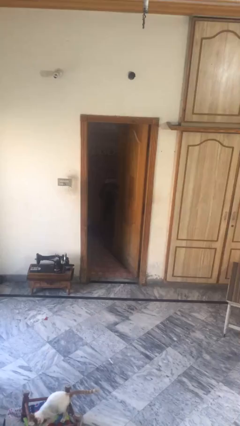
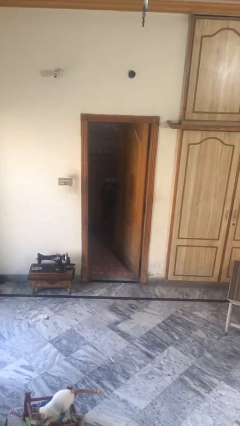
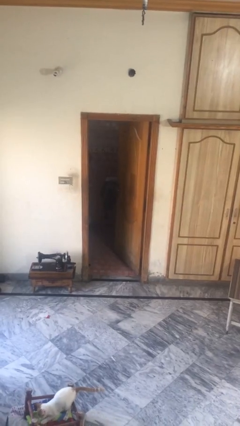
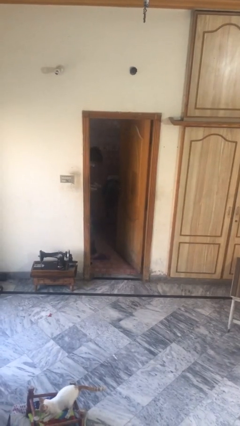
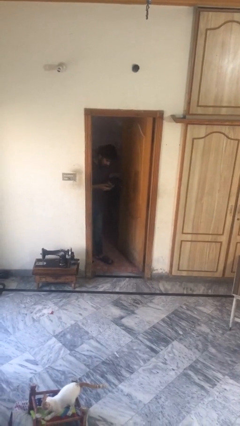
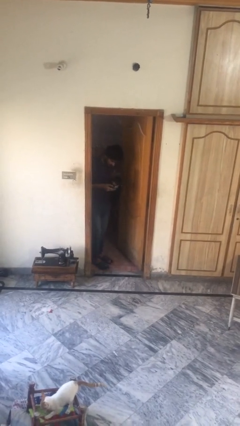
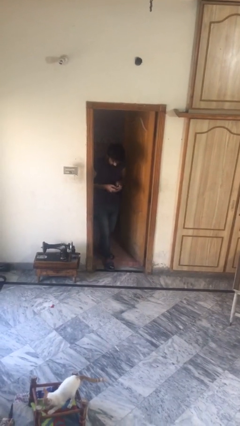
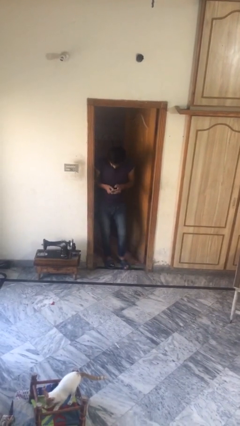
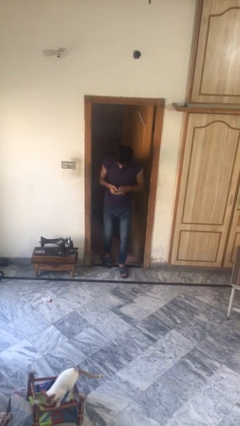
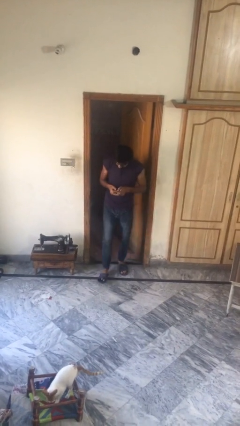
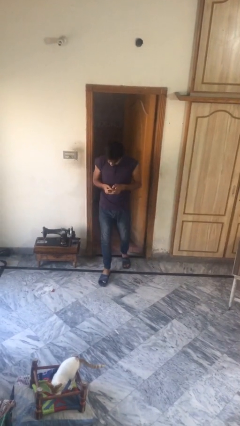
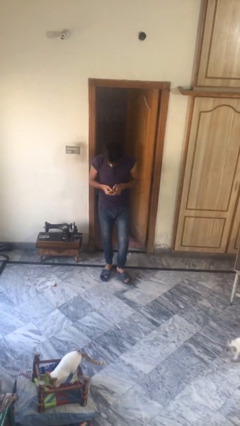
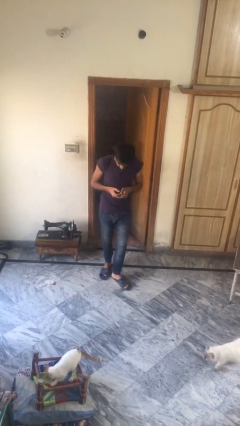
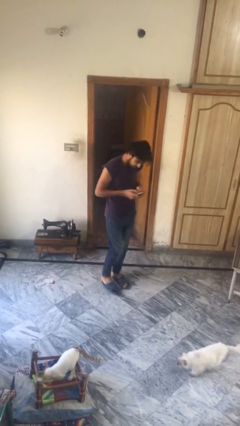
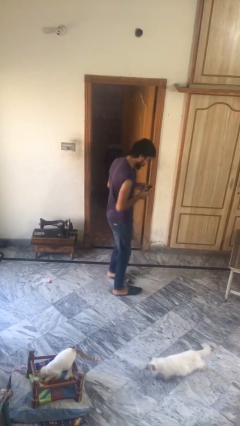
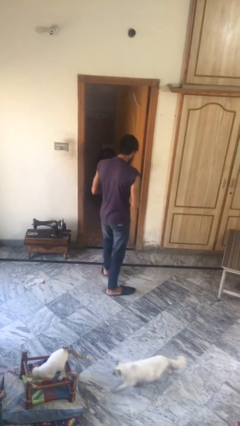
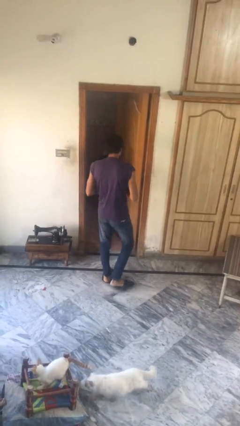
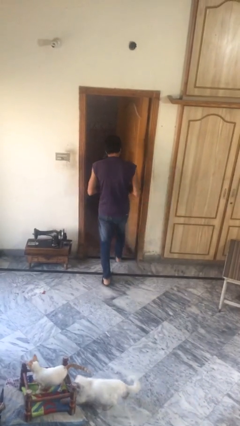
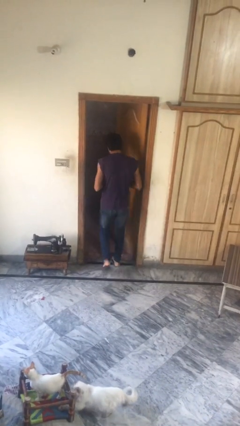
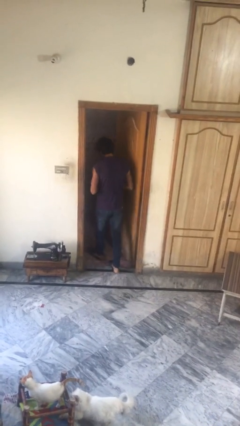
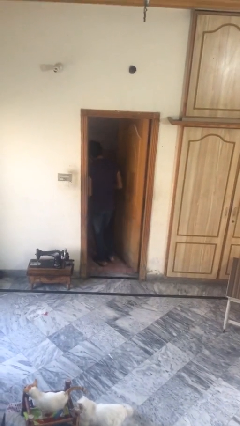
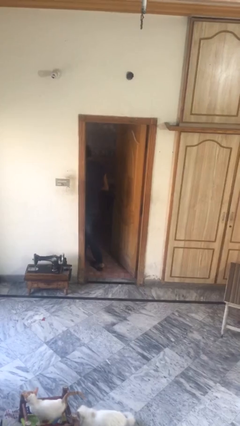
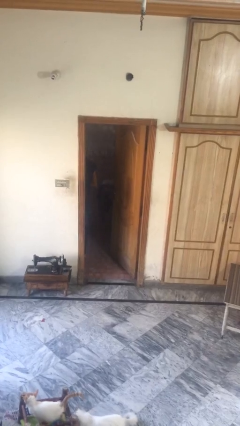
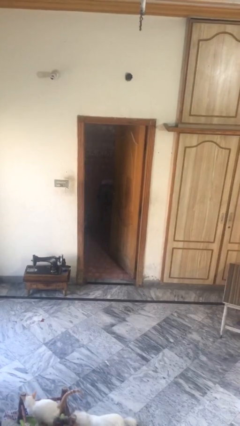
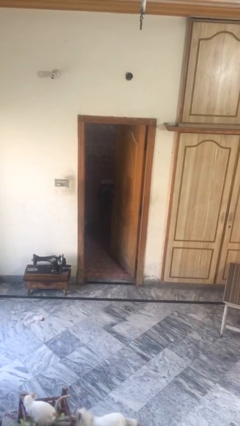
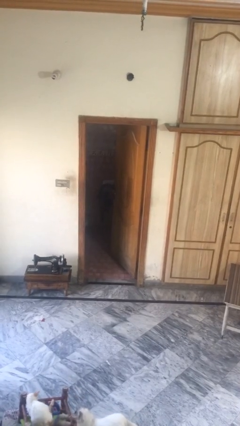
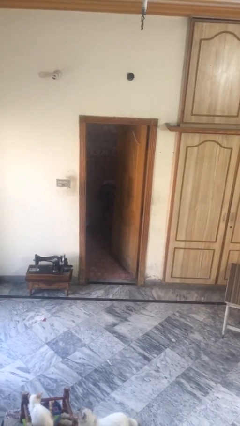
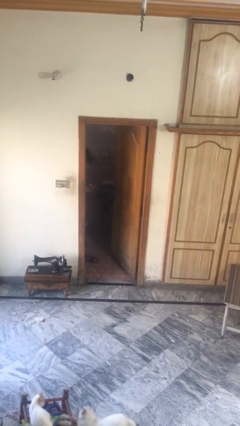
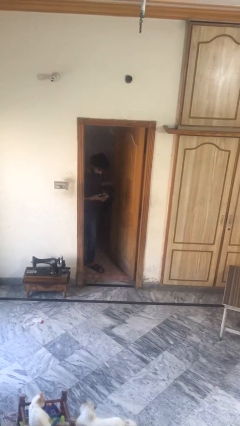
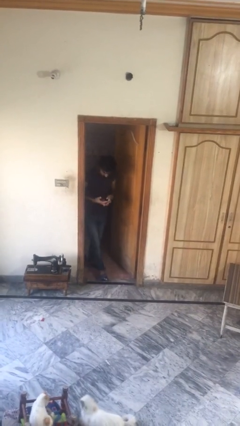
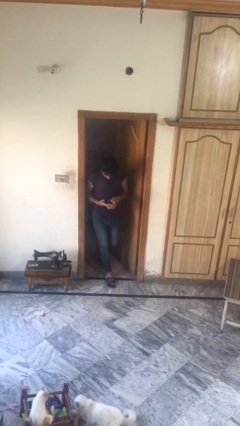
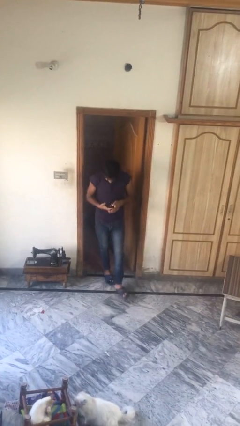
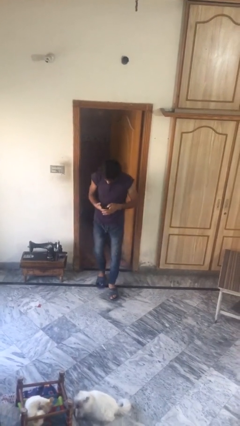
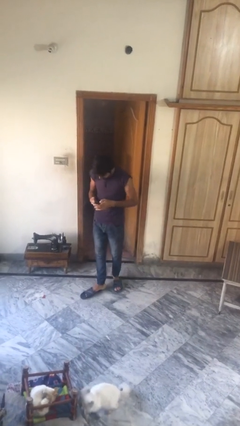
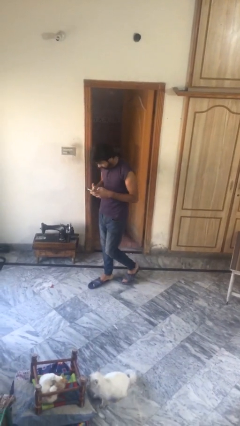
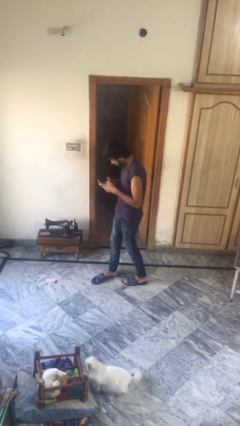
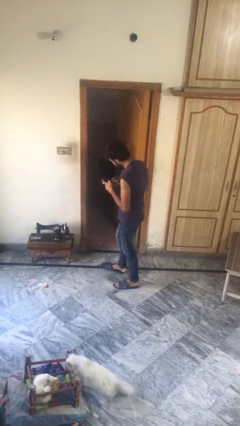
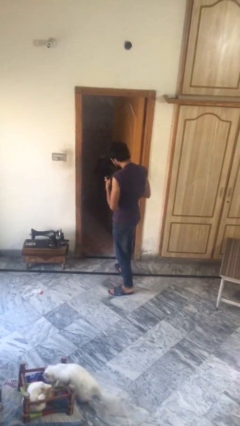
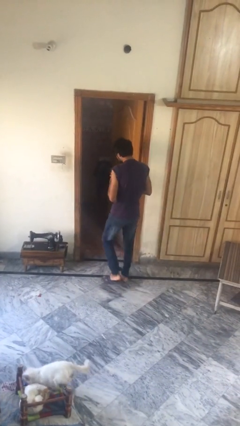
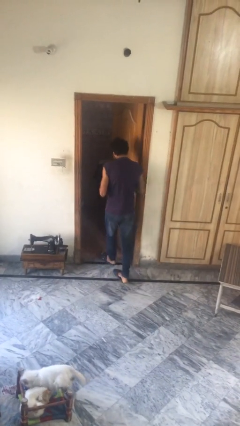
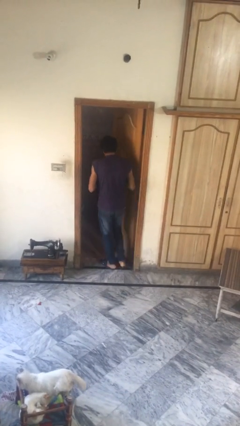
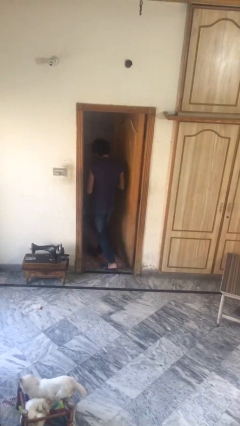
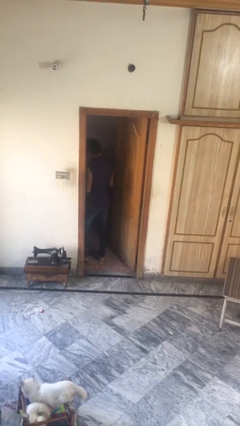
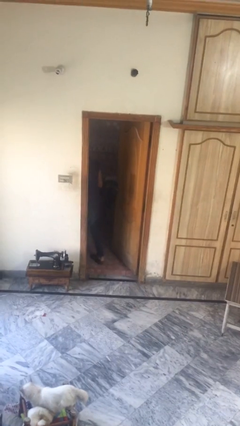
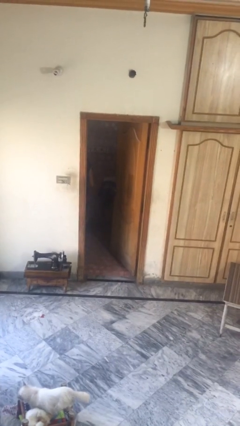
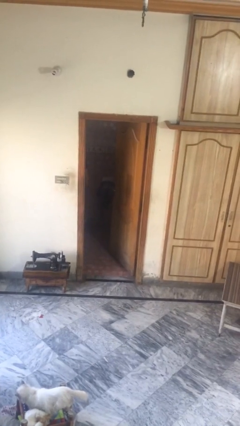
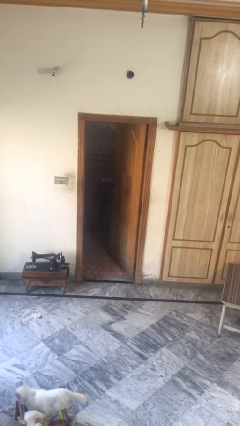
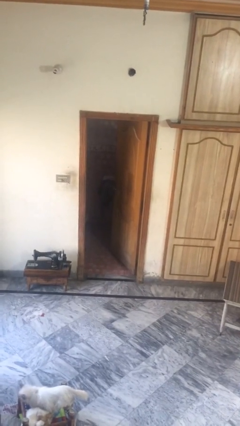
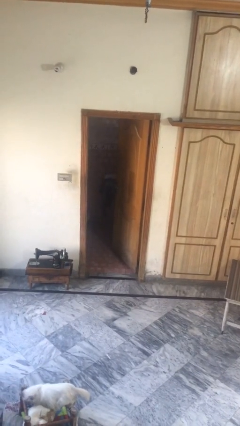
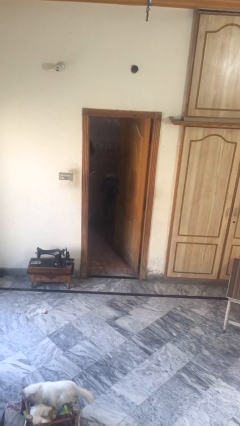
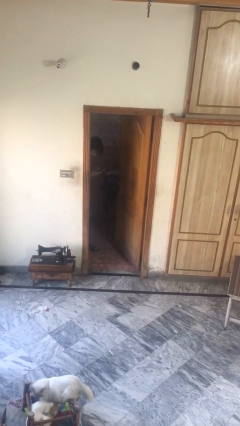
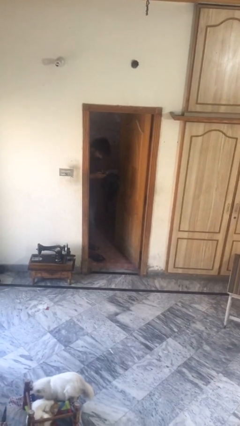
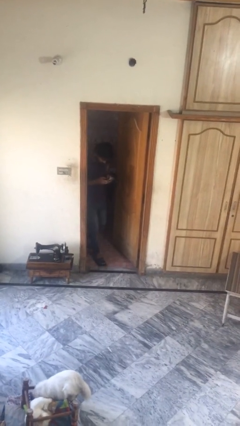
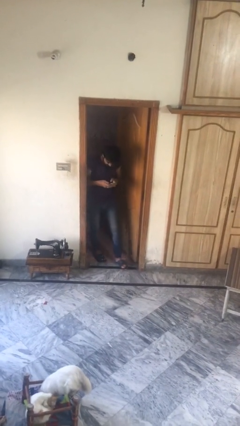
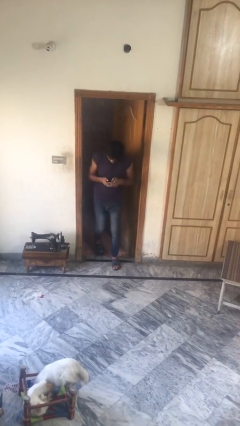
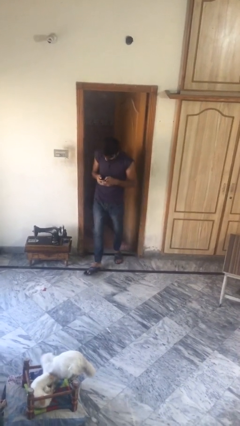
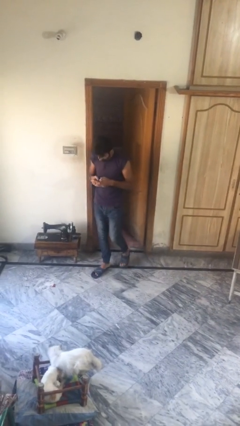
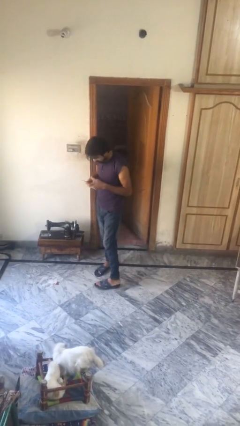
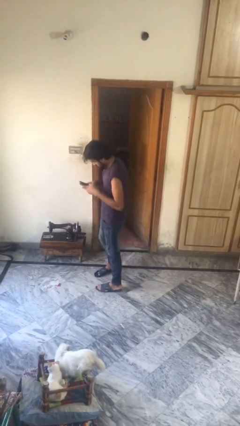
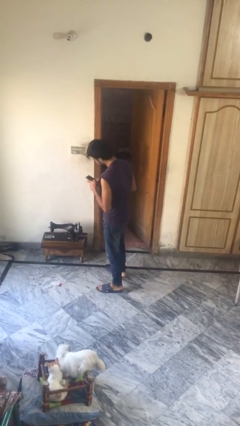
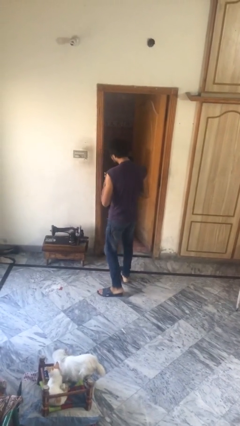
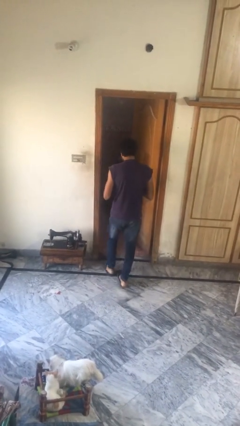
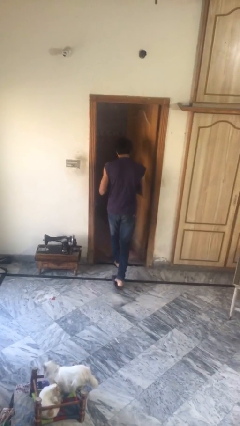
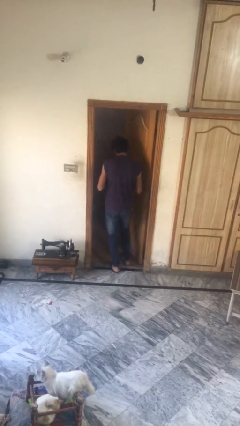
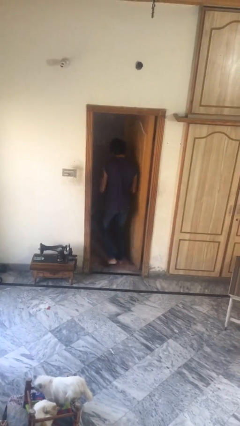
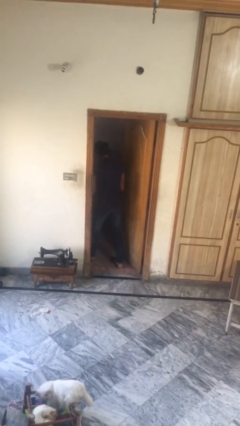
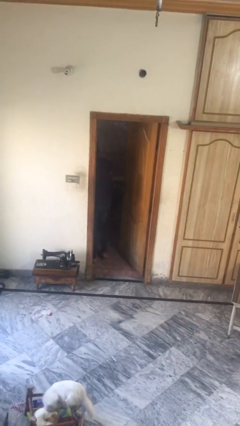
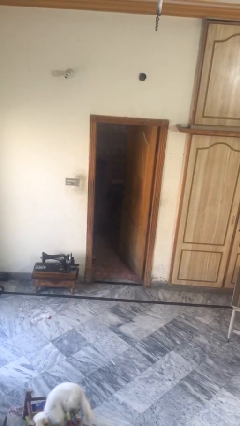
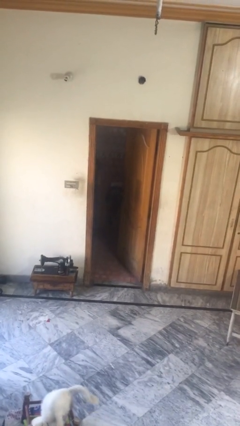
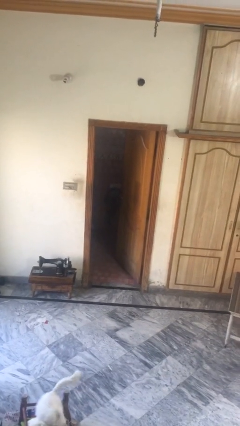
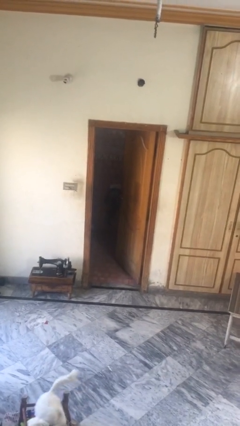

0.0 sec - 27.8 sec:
person texts on phone

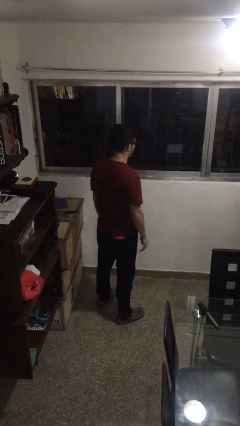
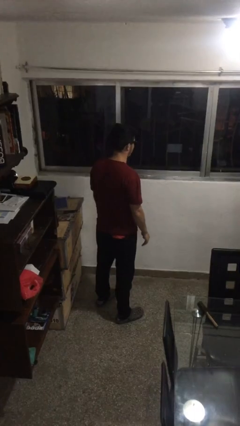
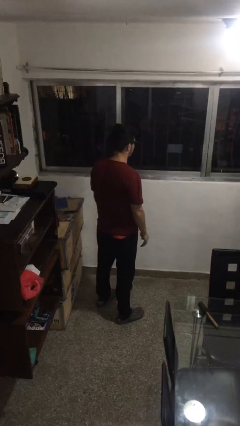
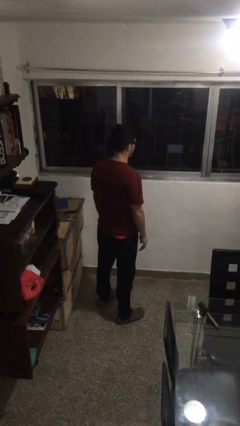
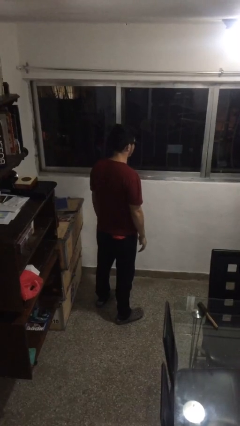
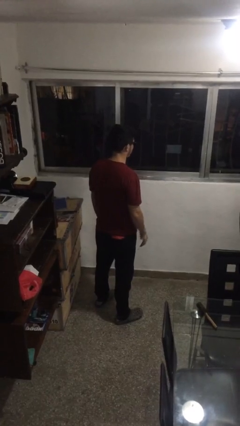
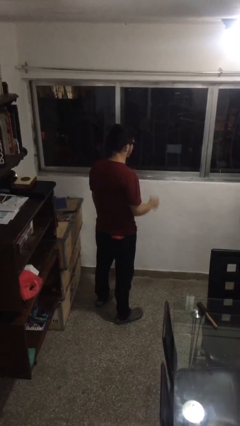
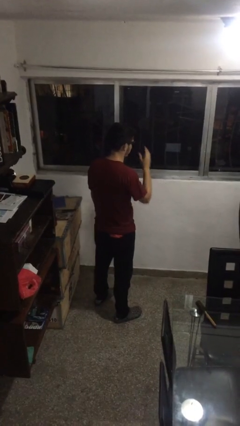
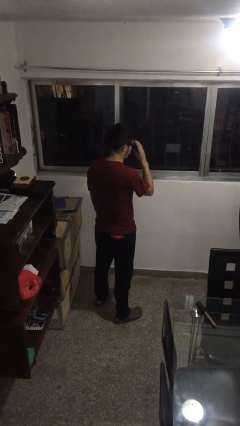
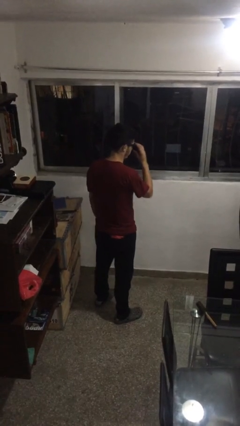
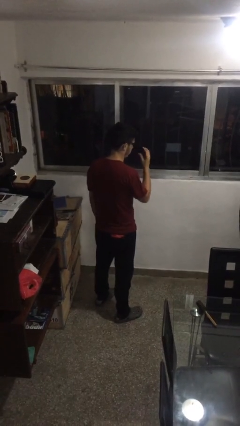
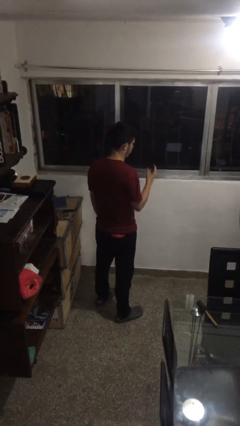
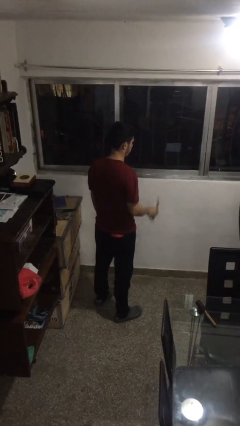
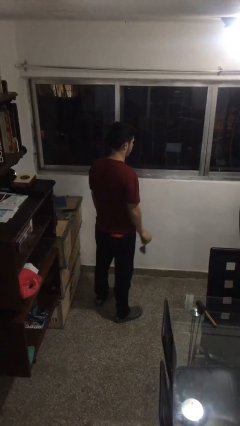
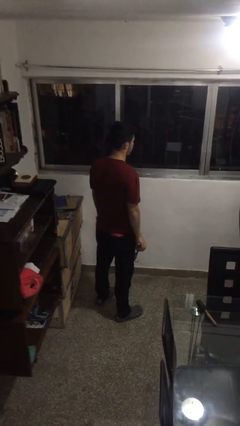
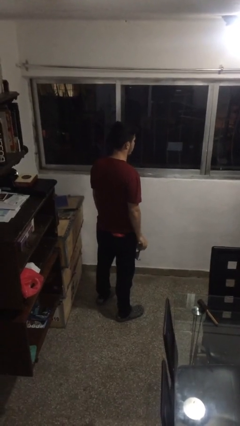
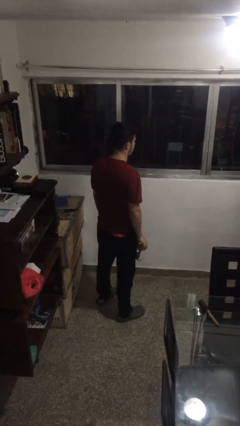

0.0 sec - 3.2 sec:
person takes off sunglasses

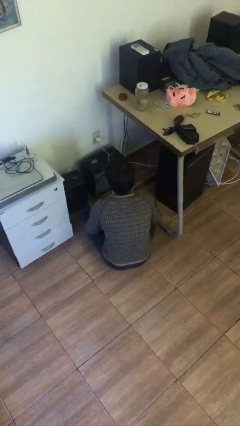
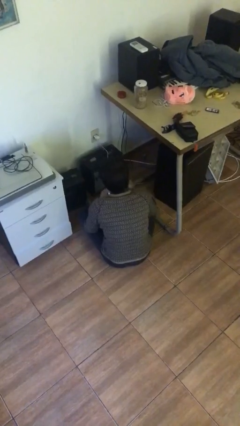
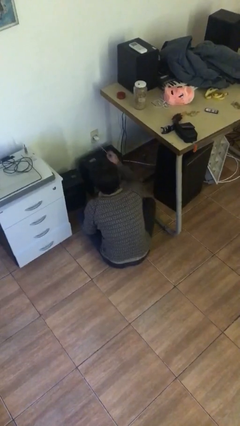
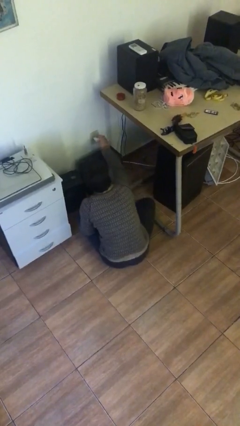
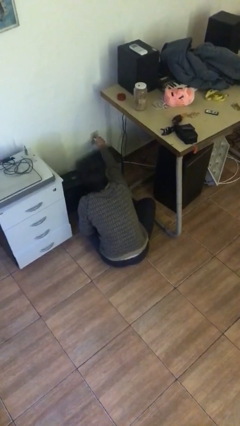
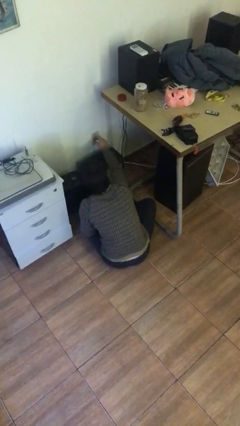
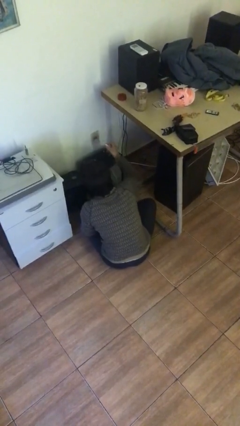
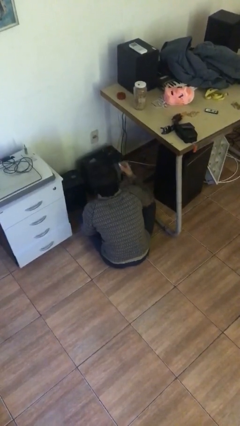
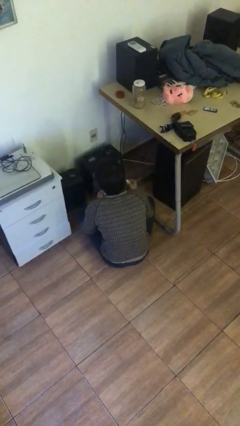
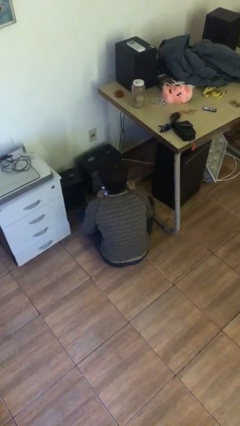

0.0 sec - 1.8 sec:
person unplugs from electrical socket
